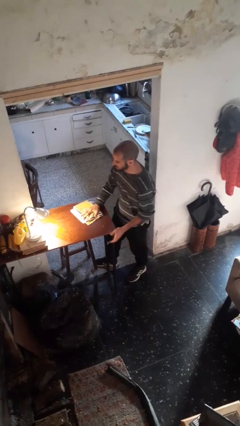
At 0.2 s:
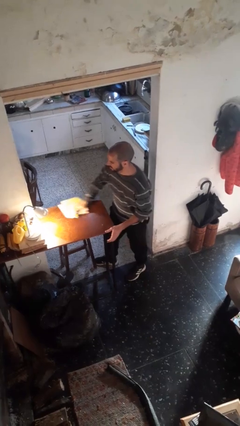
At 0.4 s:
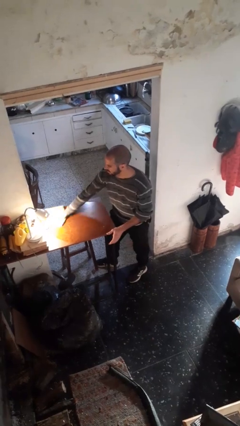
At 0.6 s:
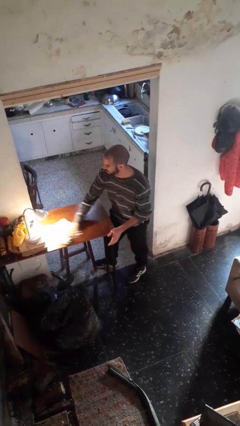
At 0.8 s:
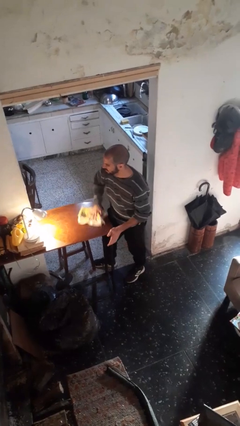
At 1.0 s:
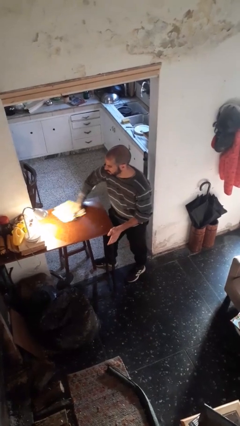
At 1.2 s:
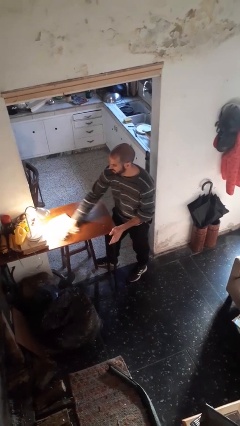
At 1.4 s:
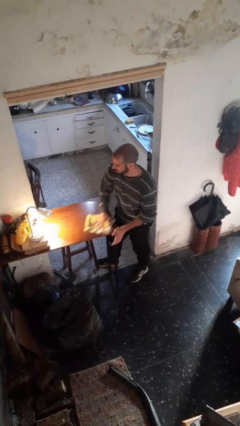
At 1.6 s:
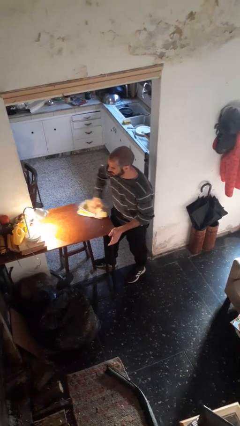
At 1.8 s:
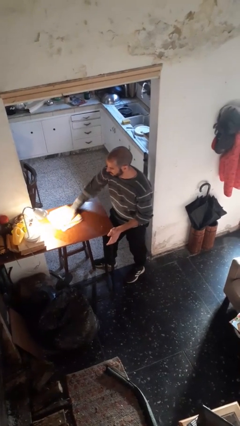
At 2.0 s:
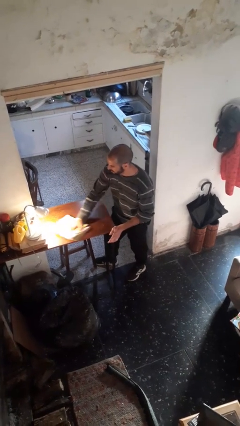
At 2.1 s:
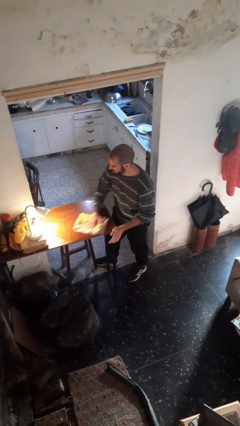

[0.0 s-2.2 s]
person cleans table with rag

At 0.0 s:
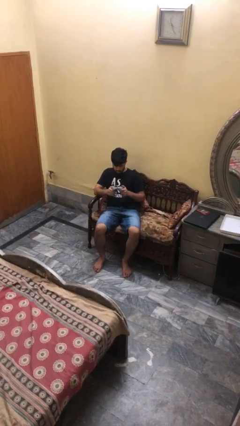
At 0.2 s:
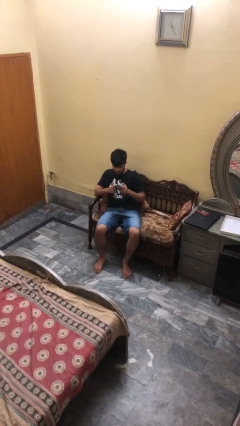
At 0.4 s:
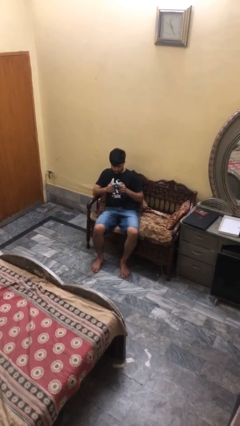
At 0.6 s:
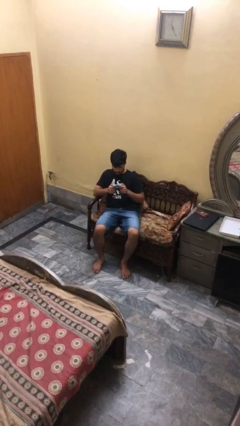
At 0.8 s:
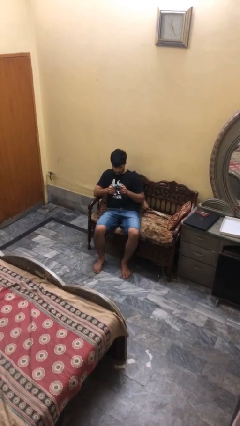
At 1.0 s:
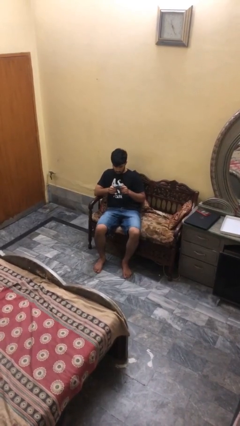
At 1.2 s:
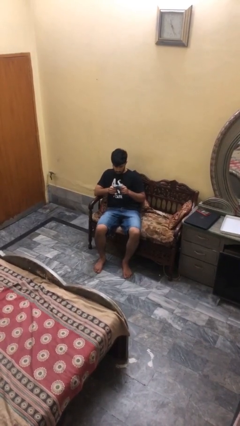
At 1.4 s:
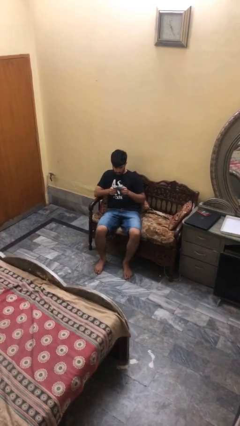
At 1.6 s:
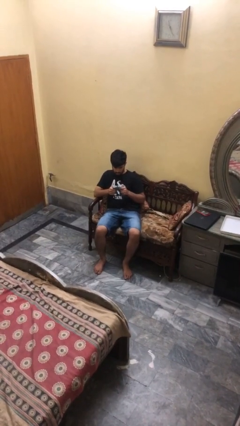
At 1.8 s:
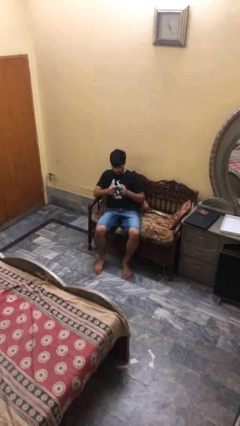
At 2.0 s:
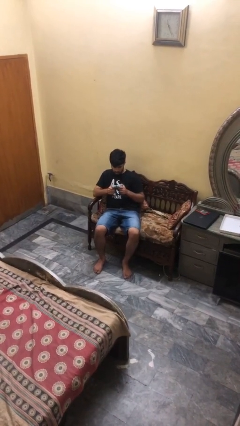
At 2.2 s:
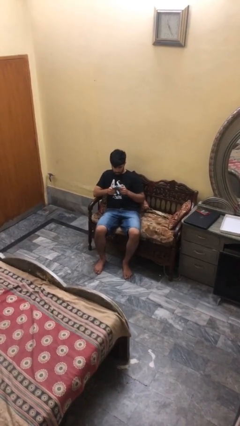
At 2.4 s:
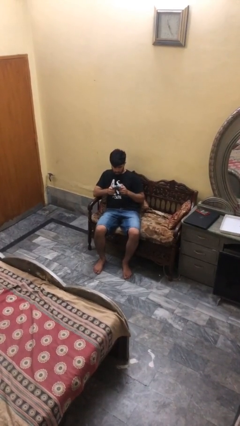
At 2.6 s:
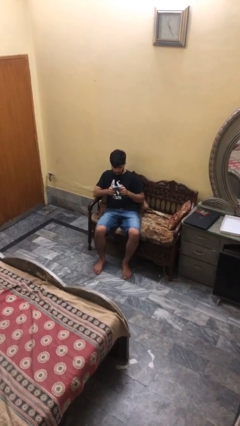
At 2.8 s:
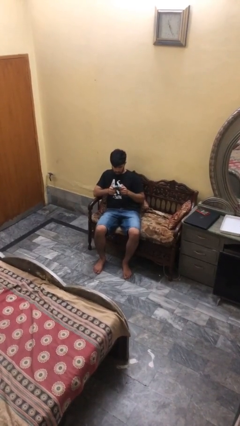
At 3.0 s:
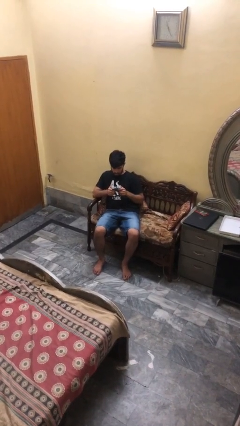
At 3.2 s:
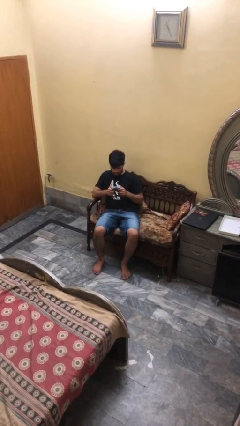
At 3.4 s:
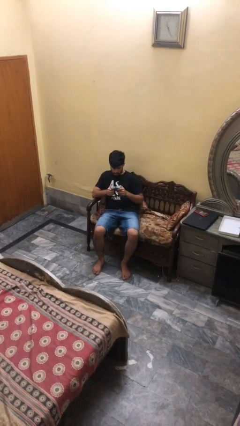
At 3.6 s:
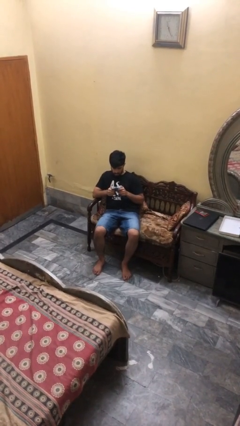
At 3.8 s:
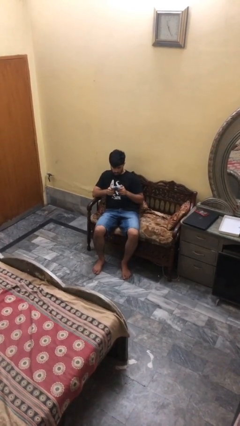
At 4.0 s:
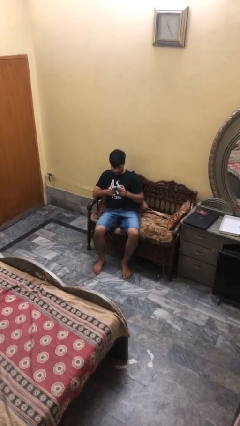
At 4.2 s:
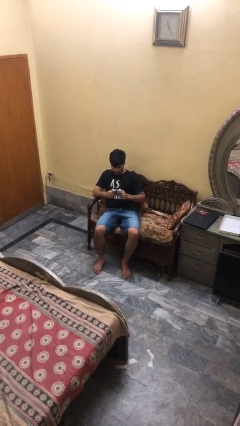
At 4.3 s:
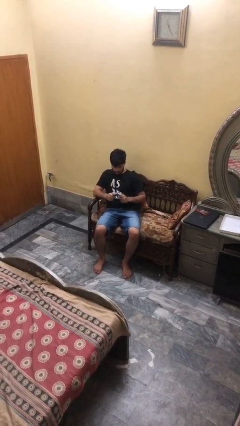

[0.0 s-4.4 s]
person interacts with handheld game

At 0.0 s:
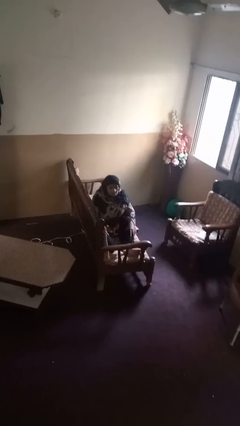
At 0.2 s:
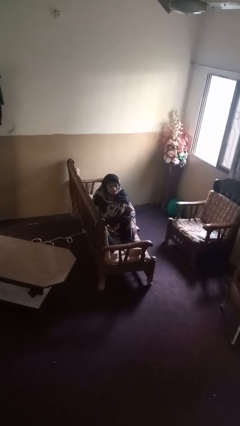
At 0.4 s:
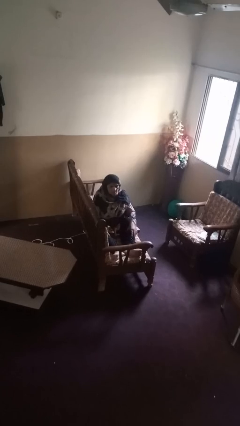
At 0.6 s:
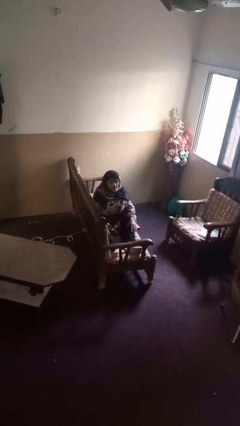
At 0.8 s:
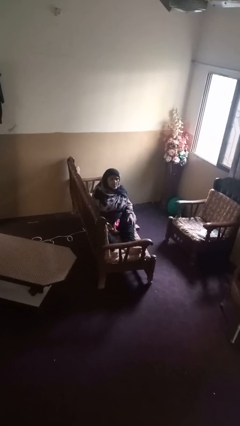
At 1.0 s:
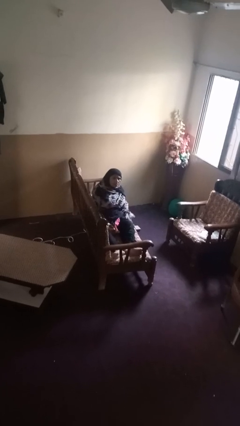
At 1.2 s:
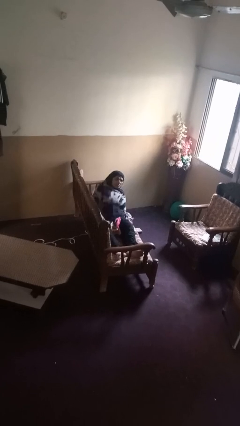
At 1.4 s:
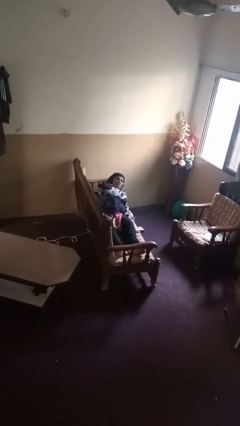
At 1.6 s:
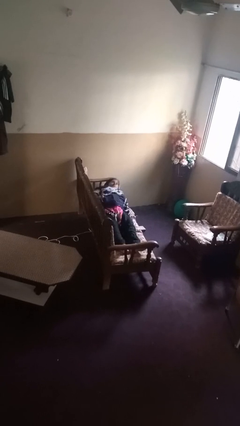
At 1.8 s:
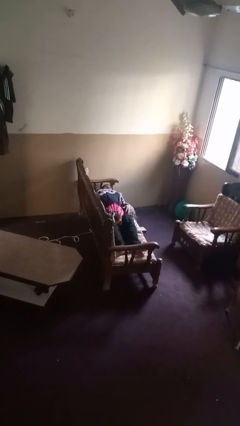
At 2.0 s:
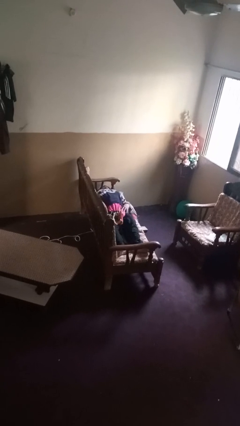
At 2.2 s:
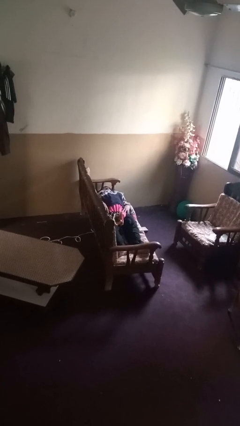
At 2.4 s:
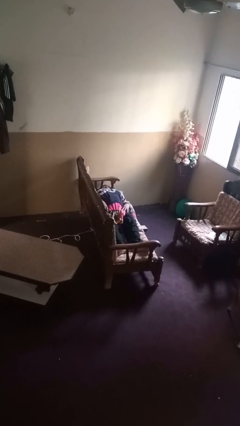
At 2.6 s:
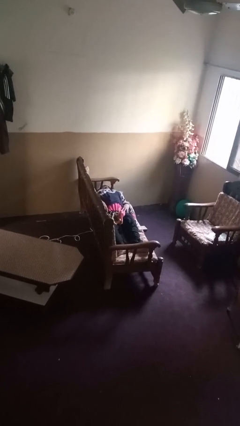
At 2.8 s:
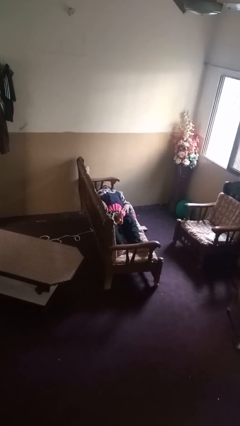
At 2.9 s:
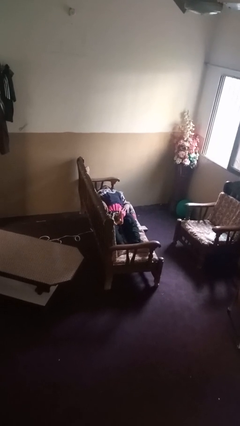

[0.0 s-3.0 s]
person lies down on couch

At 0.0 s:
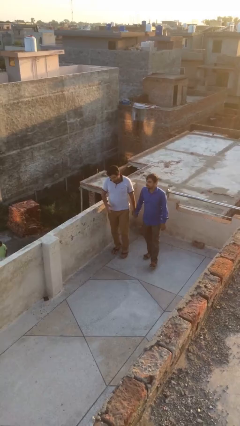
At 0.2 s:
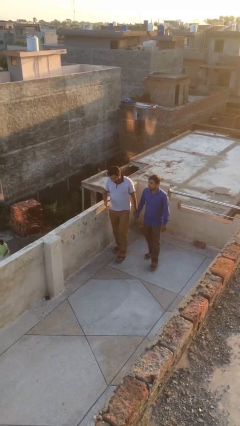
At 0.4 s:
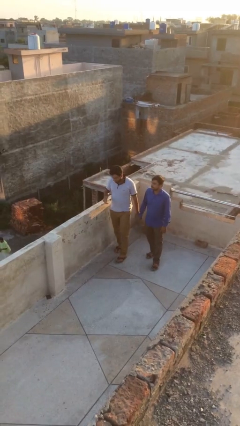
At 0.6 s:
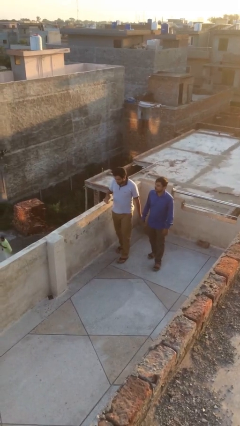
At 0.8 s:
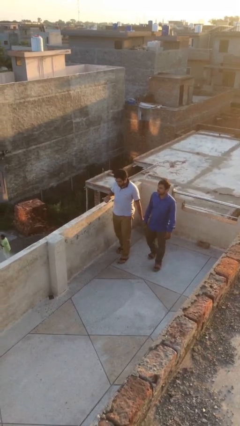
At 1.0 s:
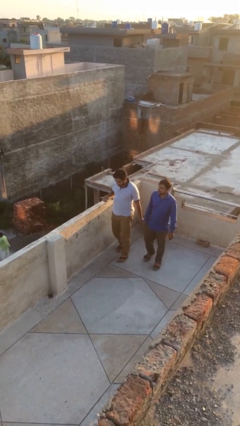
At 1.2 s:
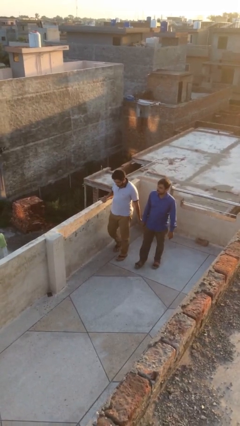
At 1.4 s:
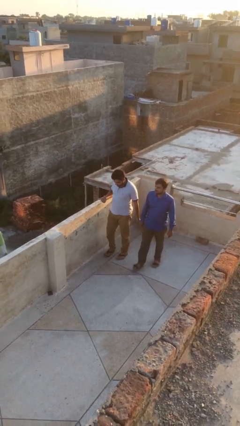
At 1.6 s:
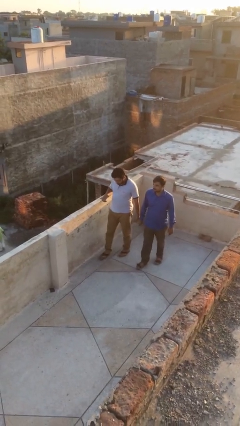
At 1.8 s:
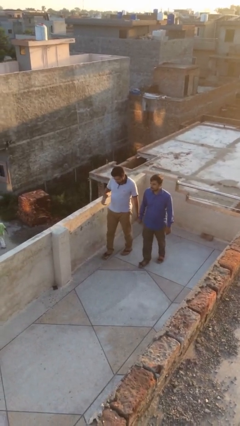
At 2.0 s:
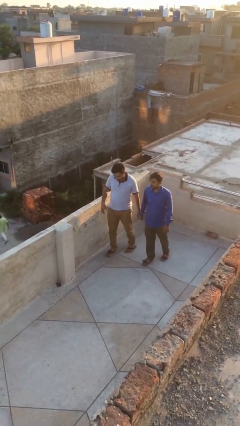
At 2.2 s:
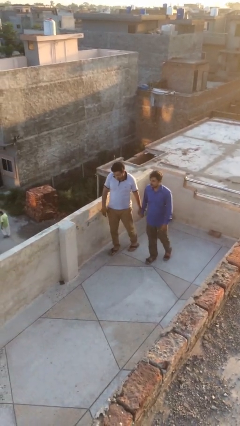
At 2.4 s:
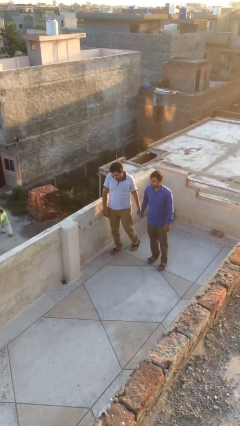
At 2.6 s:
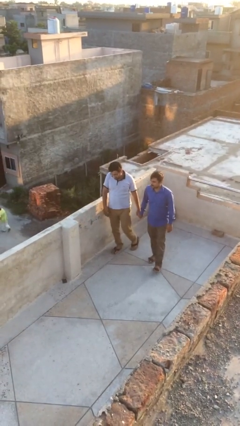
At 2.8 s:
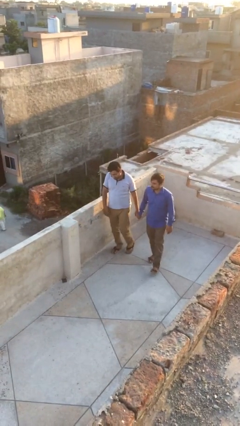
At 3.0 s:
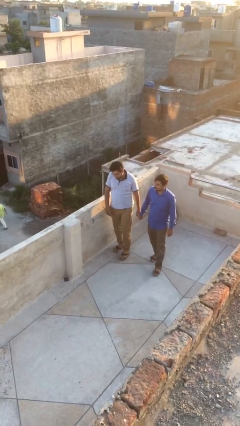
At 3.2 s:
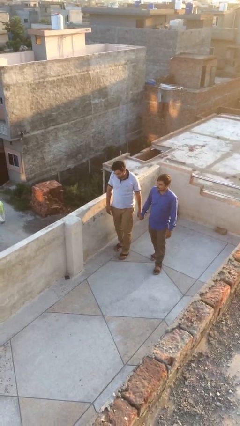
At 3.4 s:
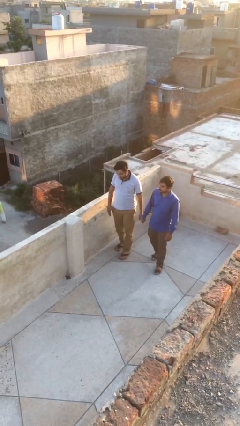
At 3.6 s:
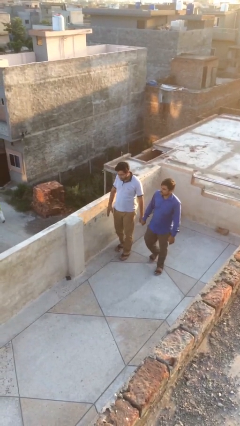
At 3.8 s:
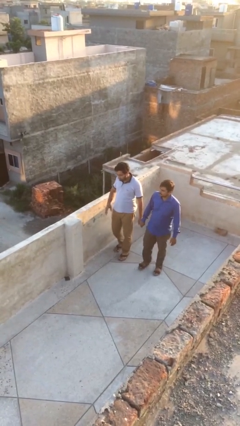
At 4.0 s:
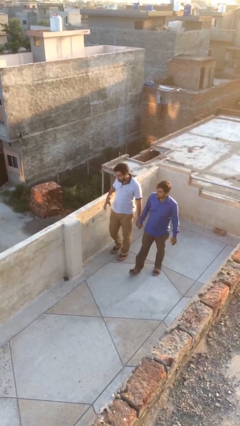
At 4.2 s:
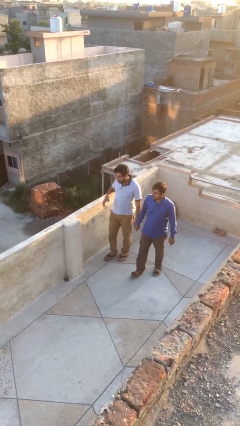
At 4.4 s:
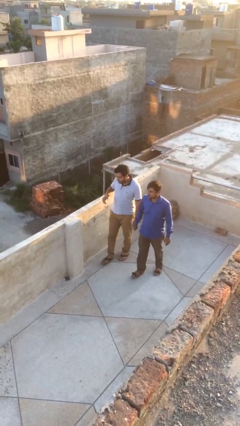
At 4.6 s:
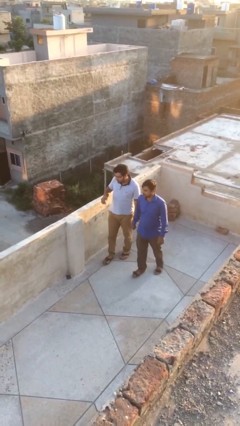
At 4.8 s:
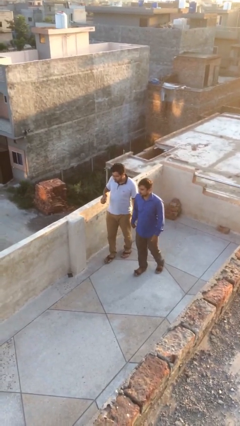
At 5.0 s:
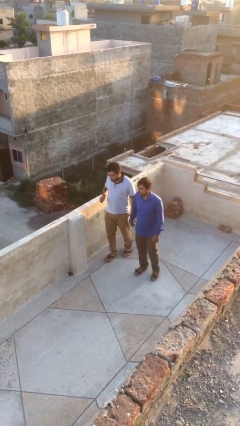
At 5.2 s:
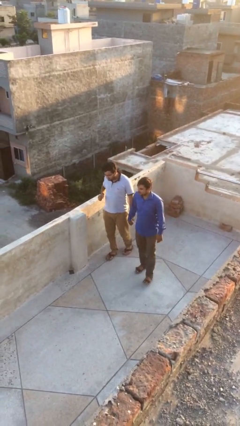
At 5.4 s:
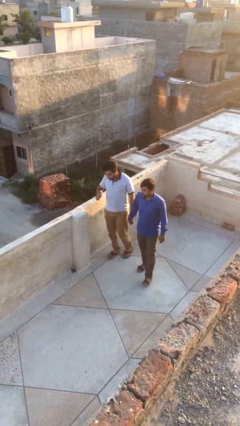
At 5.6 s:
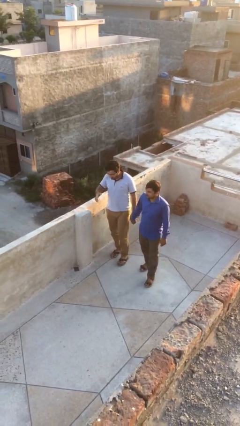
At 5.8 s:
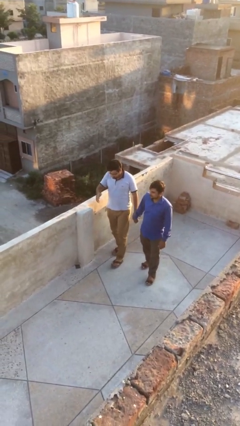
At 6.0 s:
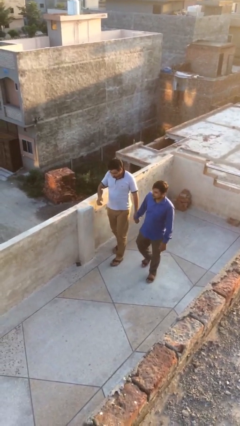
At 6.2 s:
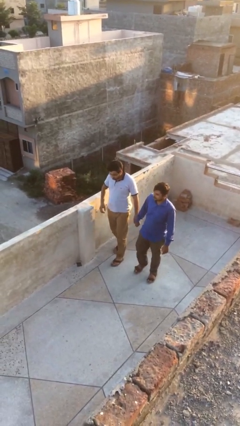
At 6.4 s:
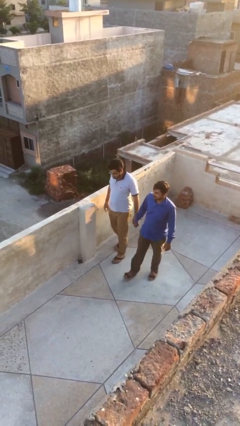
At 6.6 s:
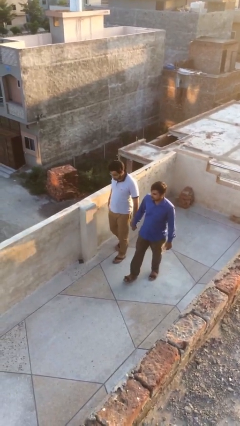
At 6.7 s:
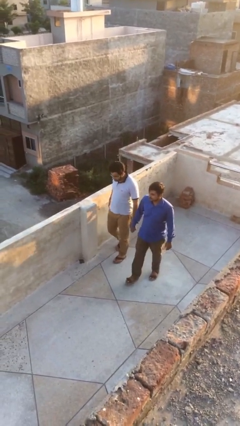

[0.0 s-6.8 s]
person holds hand

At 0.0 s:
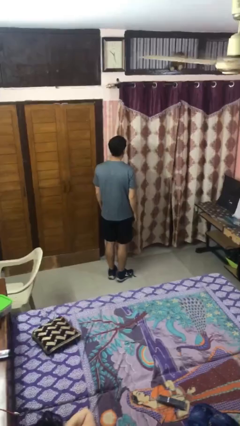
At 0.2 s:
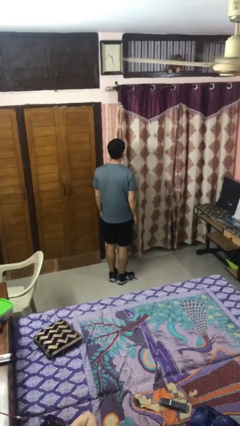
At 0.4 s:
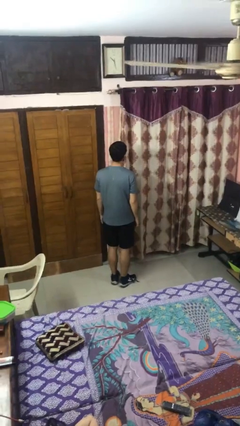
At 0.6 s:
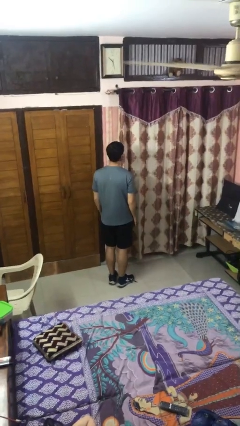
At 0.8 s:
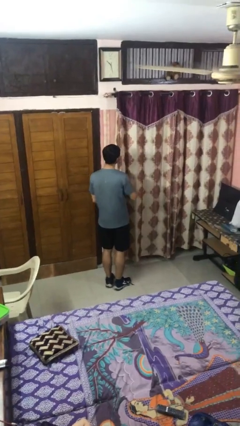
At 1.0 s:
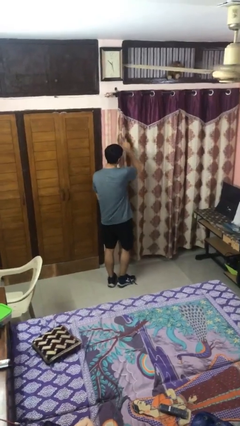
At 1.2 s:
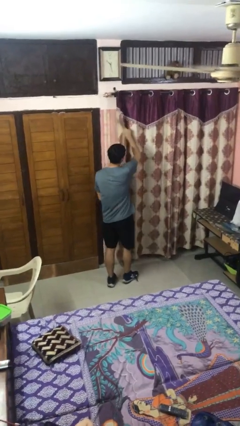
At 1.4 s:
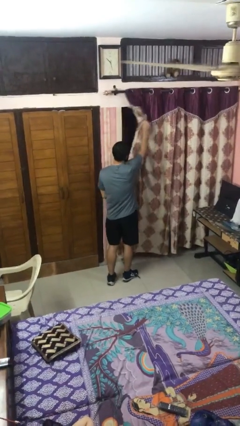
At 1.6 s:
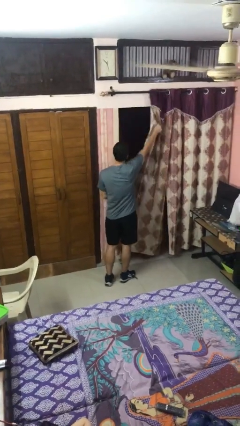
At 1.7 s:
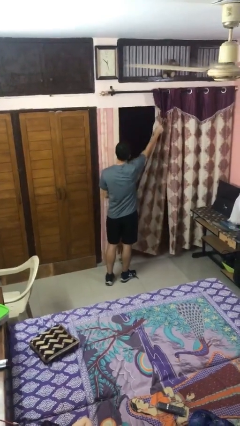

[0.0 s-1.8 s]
person opens curtains
